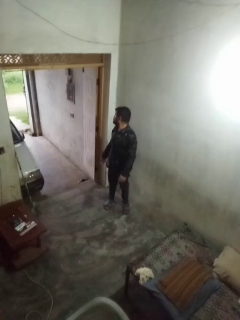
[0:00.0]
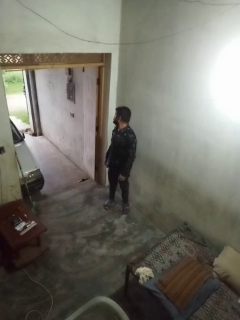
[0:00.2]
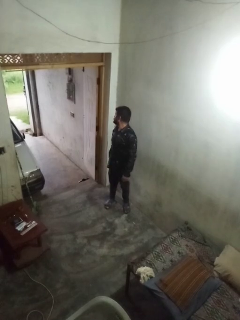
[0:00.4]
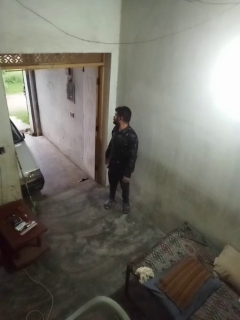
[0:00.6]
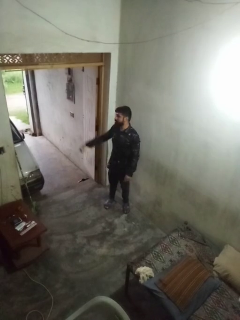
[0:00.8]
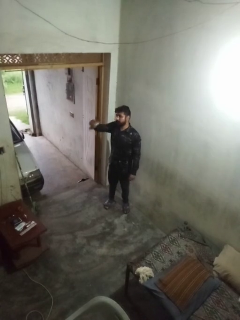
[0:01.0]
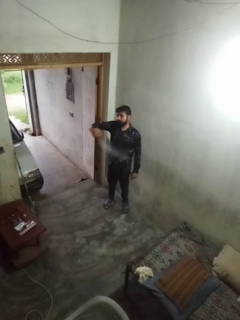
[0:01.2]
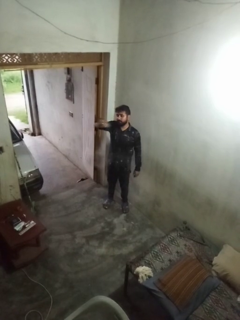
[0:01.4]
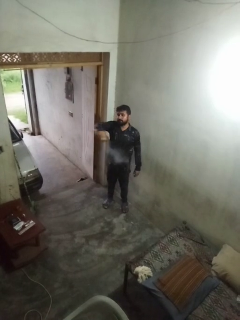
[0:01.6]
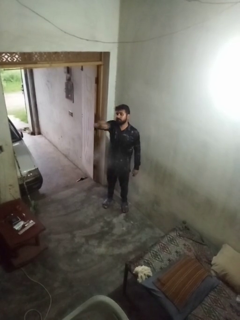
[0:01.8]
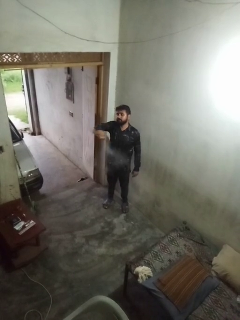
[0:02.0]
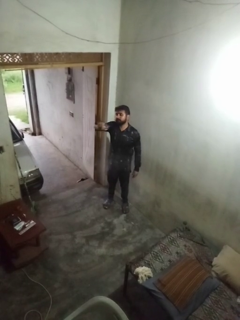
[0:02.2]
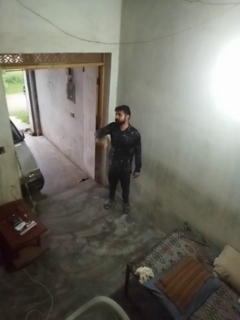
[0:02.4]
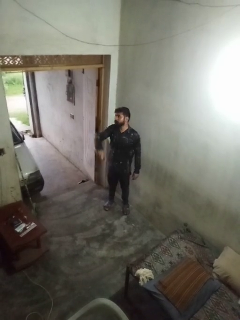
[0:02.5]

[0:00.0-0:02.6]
person applies deodorant

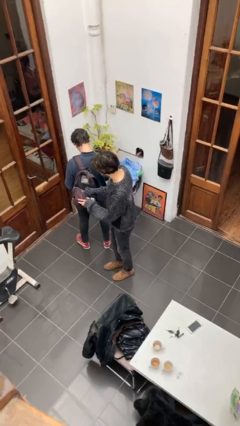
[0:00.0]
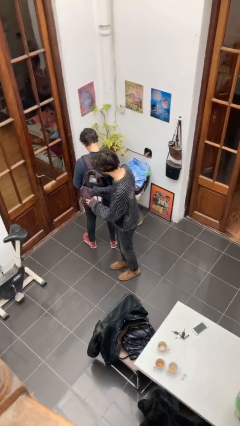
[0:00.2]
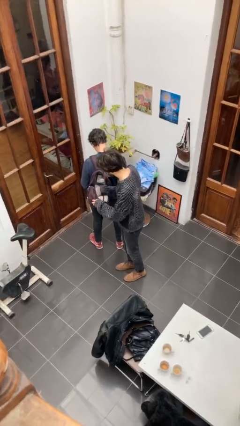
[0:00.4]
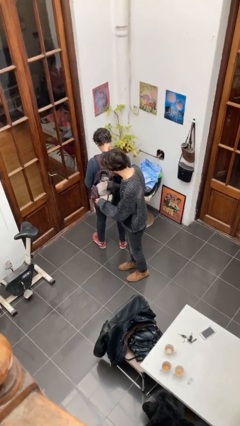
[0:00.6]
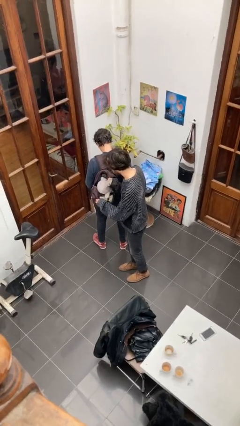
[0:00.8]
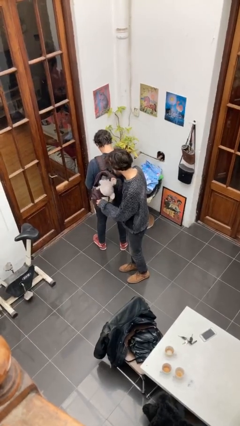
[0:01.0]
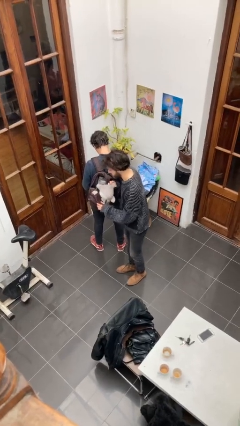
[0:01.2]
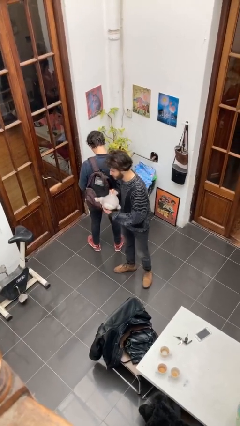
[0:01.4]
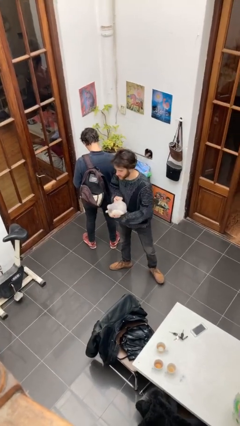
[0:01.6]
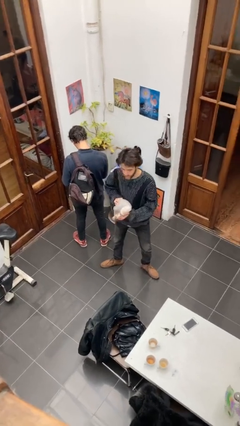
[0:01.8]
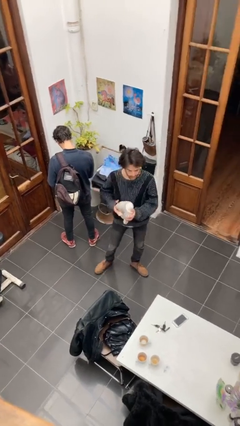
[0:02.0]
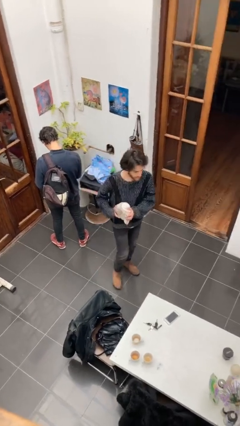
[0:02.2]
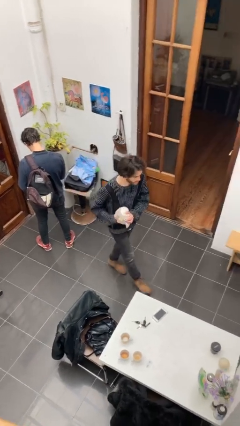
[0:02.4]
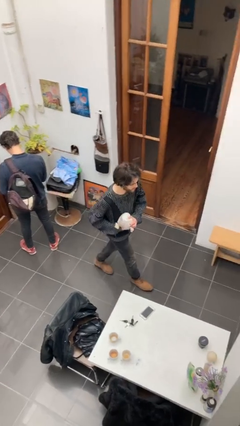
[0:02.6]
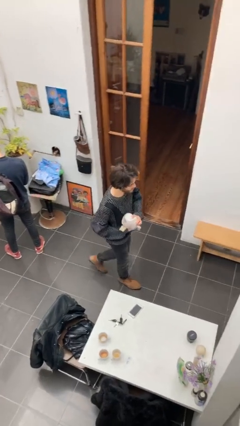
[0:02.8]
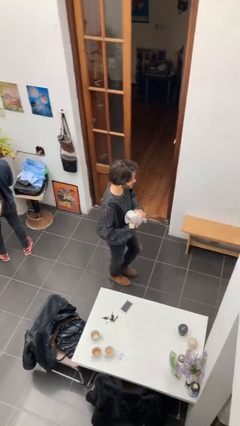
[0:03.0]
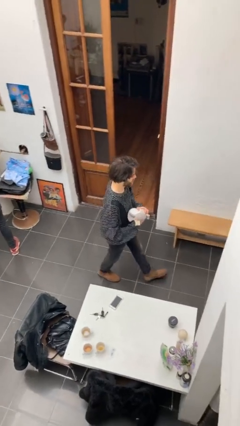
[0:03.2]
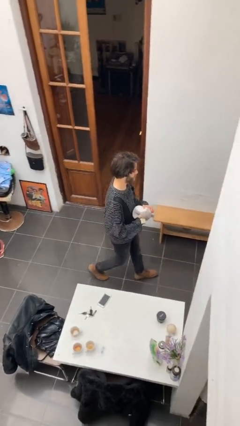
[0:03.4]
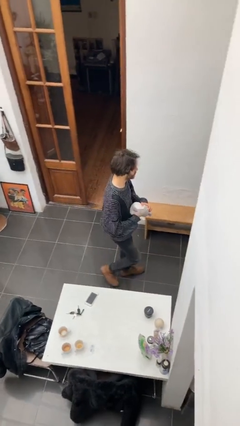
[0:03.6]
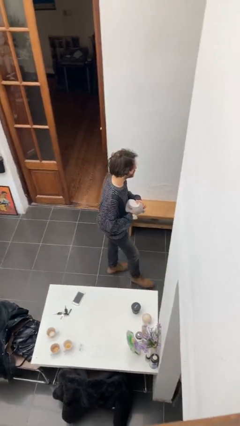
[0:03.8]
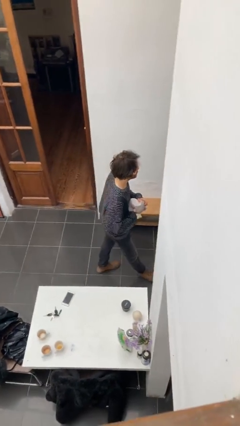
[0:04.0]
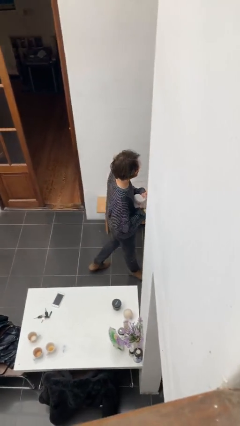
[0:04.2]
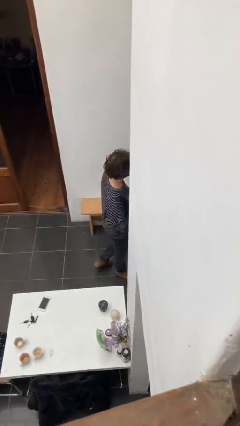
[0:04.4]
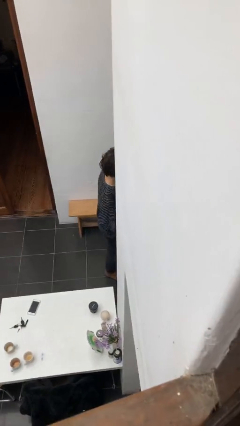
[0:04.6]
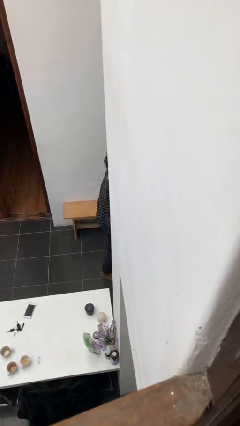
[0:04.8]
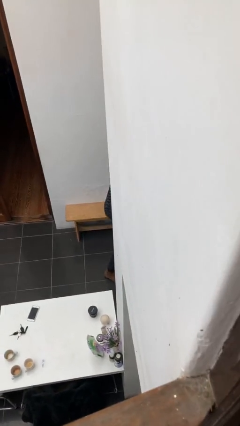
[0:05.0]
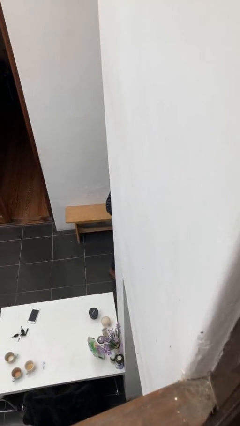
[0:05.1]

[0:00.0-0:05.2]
person steals object from person

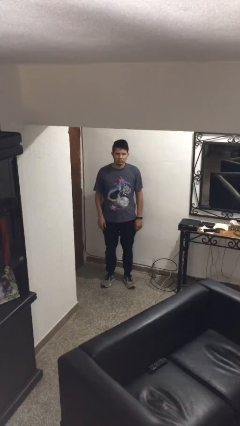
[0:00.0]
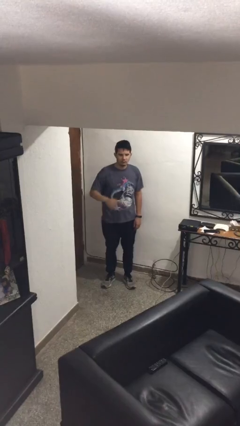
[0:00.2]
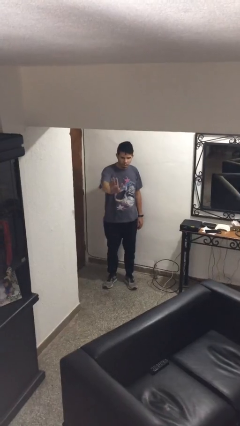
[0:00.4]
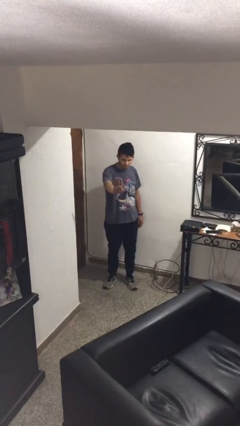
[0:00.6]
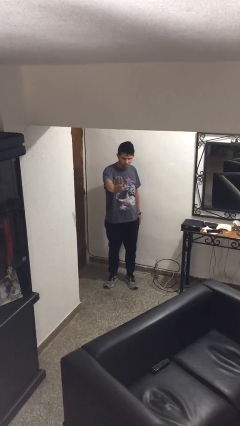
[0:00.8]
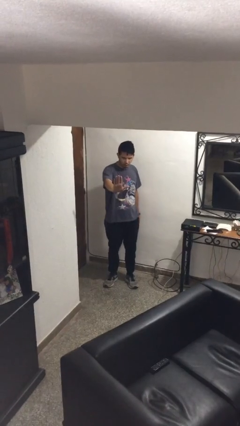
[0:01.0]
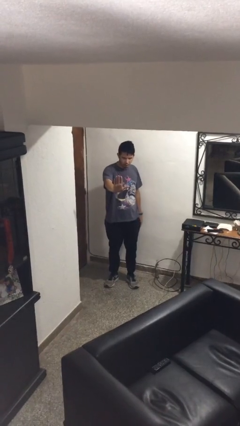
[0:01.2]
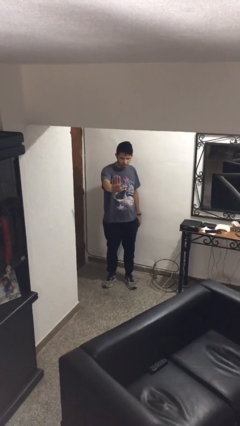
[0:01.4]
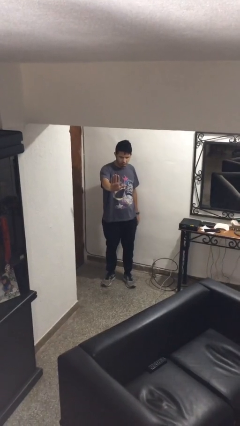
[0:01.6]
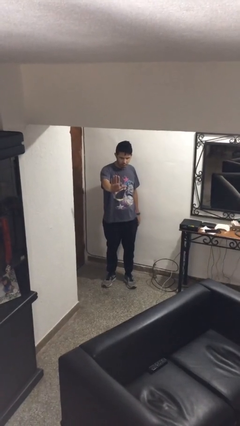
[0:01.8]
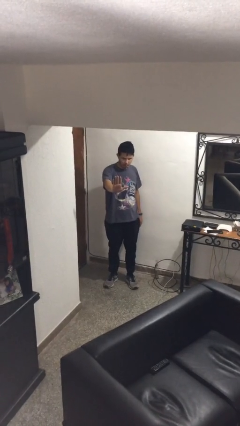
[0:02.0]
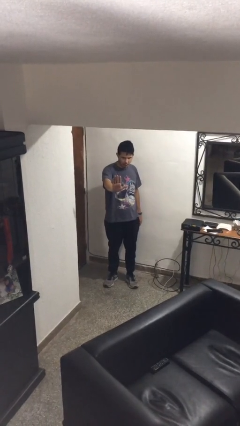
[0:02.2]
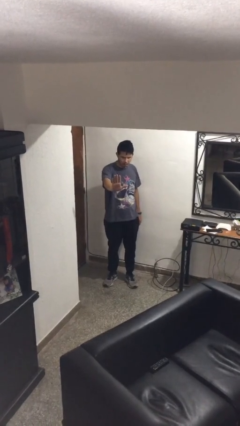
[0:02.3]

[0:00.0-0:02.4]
person gestures stop

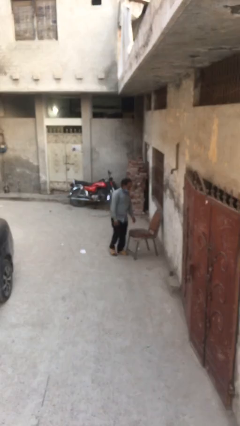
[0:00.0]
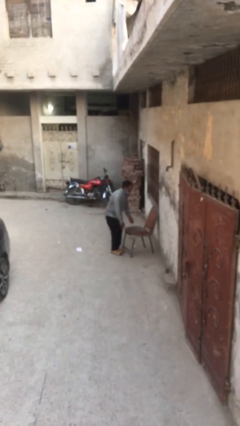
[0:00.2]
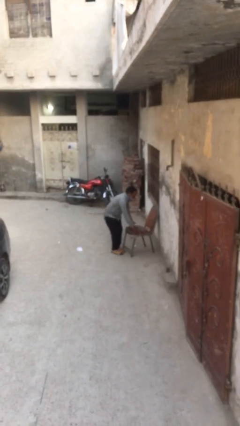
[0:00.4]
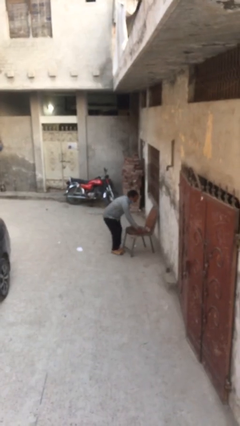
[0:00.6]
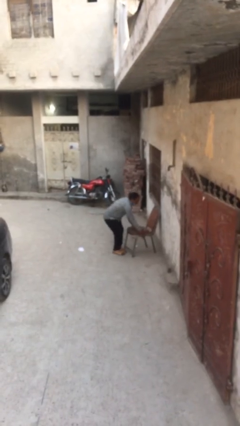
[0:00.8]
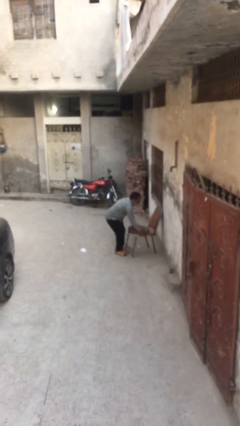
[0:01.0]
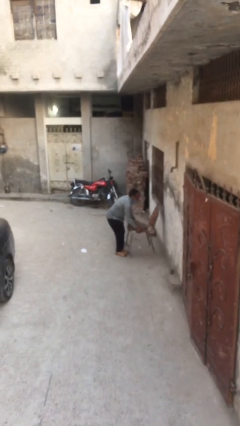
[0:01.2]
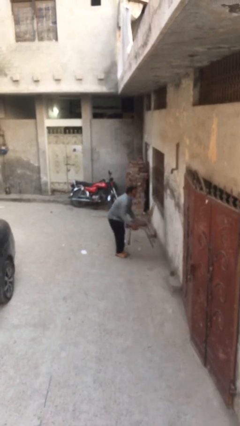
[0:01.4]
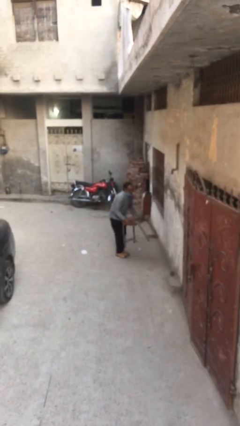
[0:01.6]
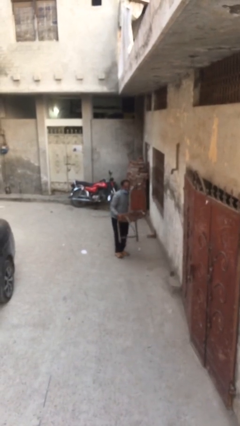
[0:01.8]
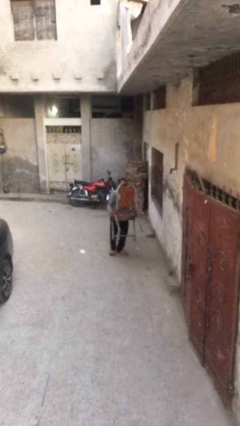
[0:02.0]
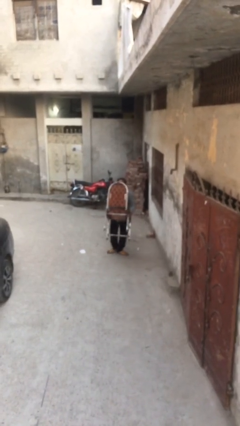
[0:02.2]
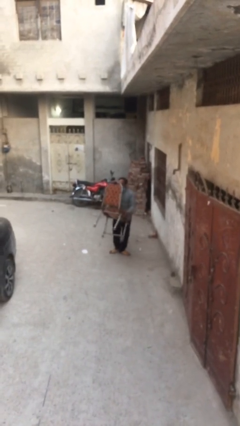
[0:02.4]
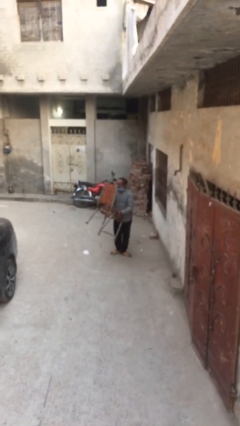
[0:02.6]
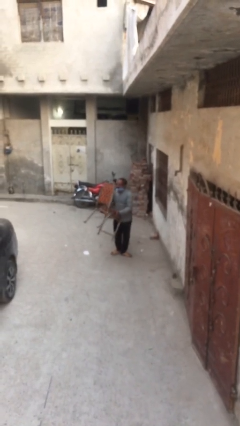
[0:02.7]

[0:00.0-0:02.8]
person picks up object from floor

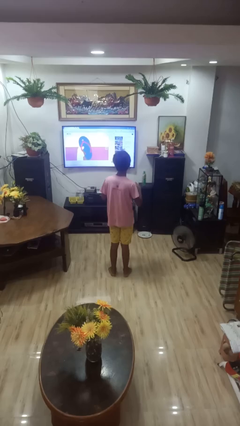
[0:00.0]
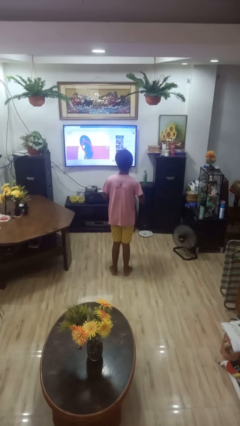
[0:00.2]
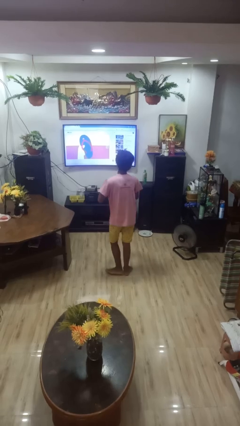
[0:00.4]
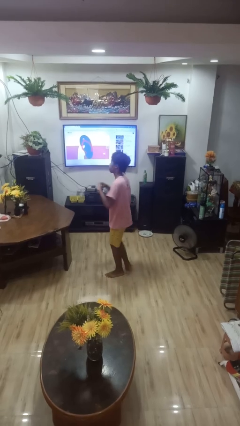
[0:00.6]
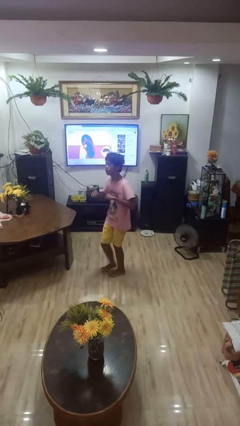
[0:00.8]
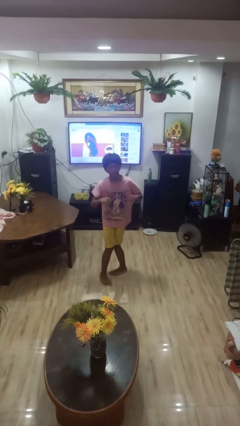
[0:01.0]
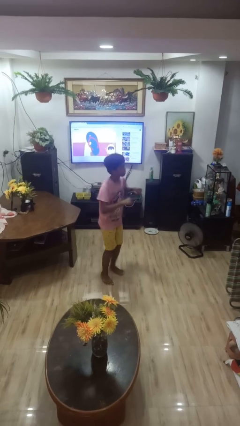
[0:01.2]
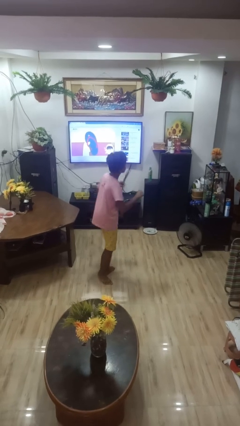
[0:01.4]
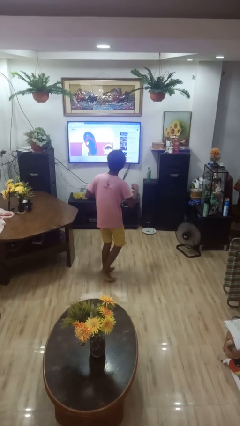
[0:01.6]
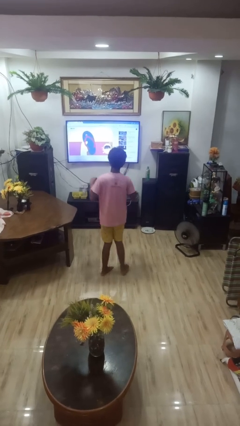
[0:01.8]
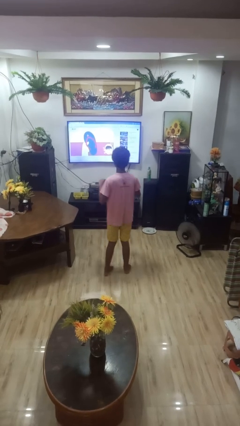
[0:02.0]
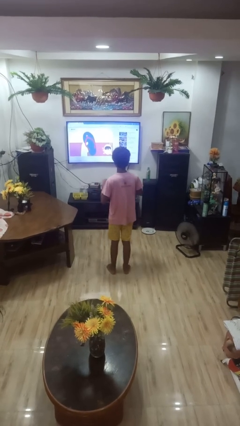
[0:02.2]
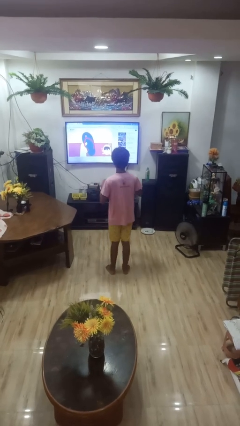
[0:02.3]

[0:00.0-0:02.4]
person twirls

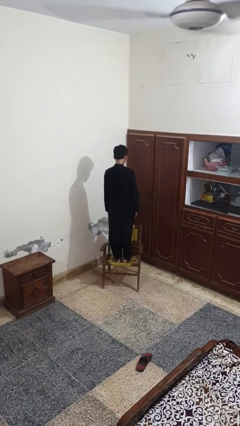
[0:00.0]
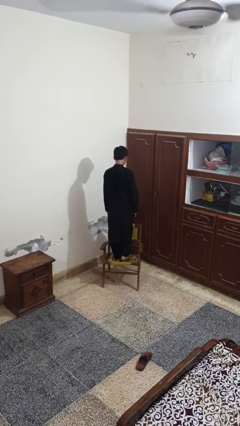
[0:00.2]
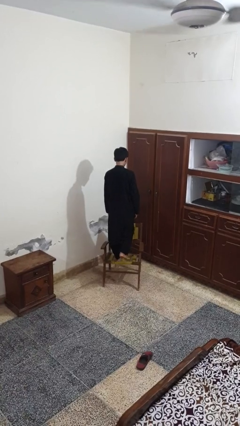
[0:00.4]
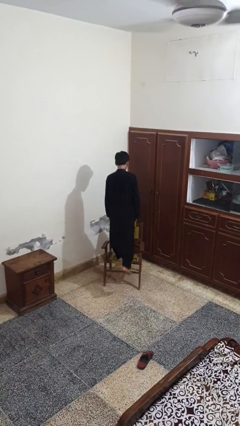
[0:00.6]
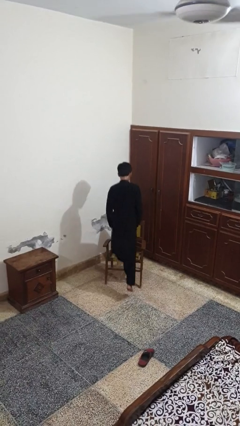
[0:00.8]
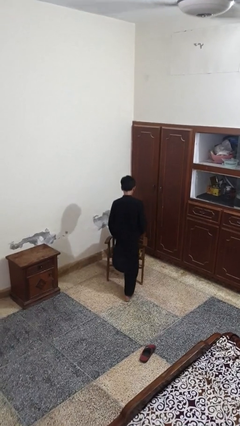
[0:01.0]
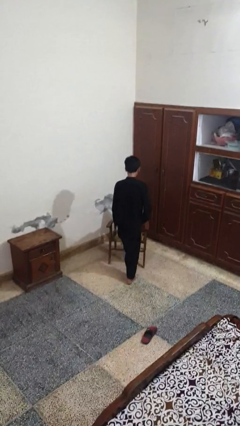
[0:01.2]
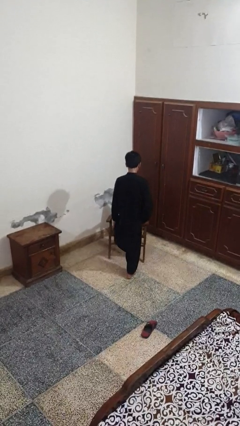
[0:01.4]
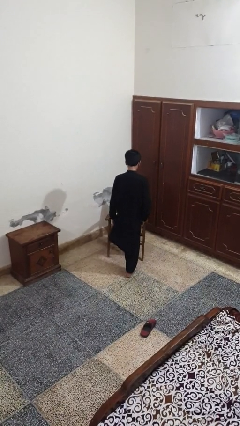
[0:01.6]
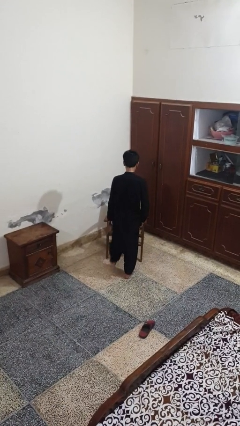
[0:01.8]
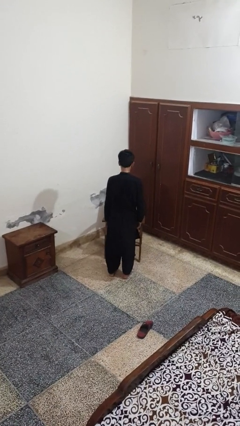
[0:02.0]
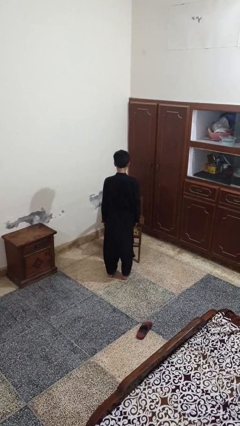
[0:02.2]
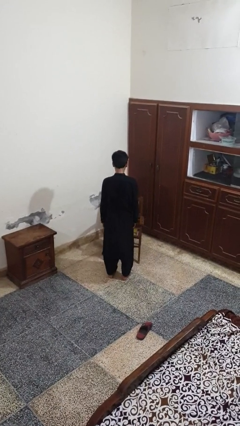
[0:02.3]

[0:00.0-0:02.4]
person climbs off chair

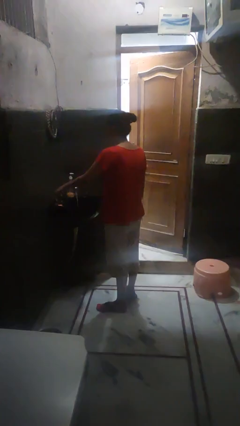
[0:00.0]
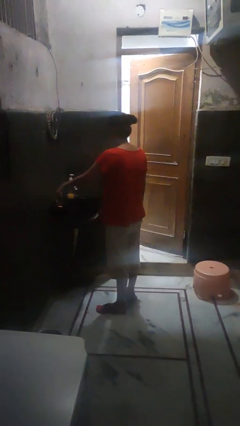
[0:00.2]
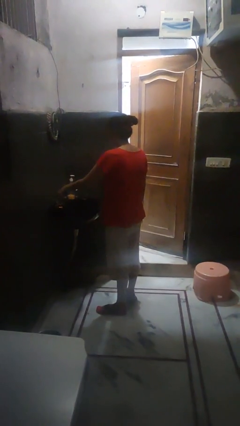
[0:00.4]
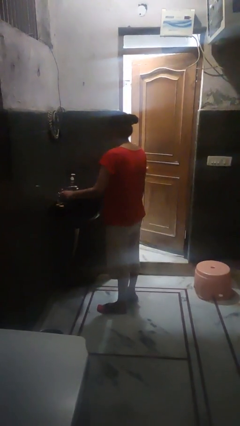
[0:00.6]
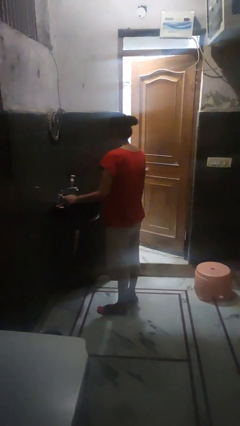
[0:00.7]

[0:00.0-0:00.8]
person turns off faucet
